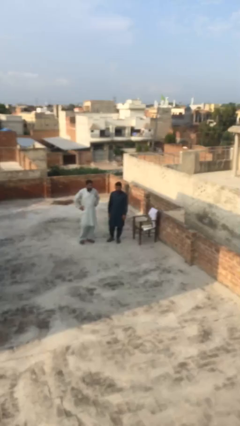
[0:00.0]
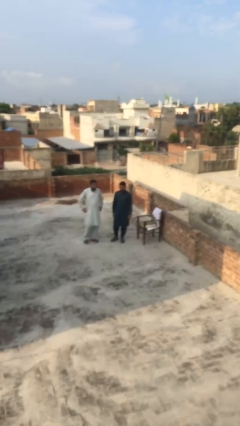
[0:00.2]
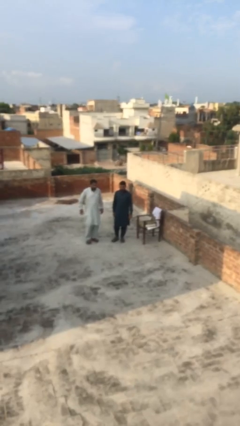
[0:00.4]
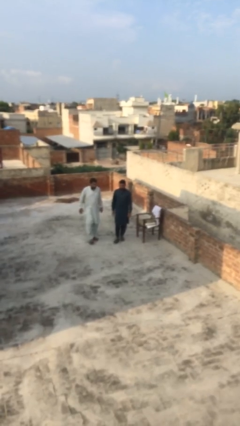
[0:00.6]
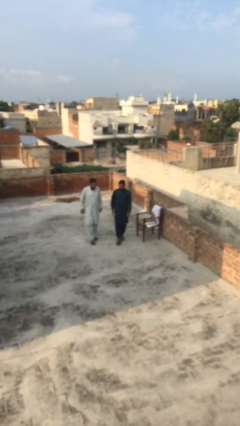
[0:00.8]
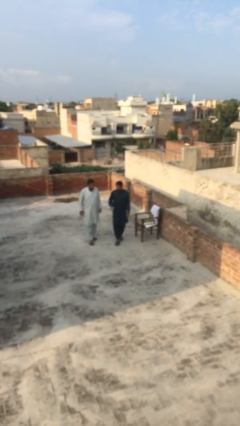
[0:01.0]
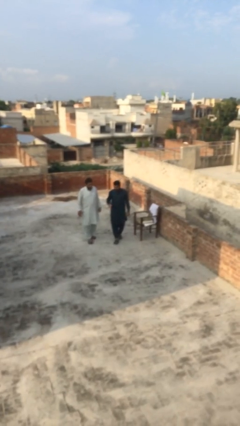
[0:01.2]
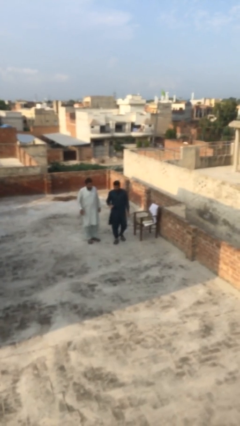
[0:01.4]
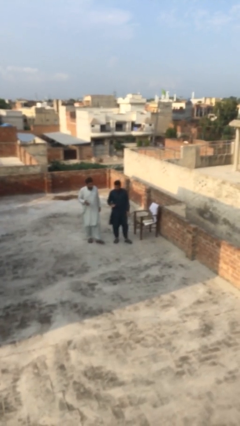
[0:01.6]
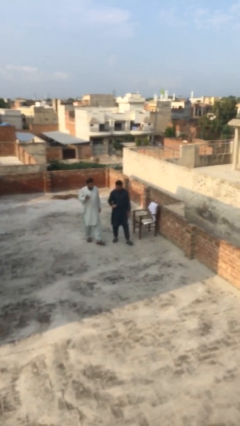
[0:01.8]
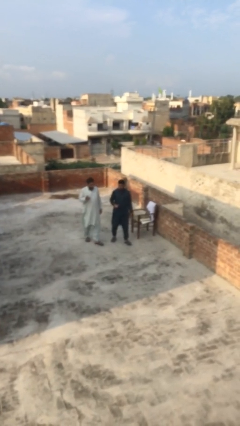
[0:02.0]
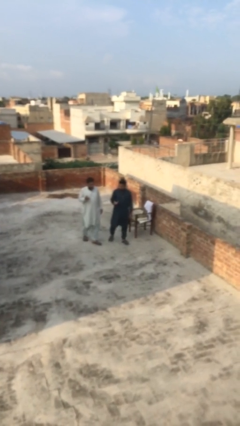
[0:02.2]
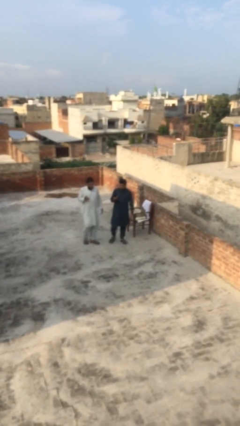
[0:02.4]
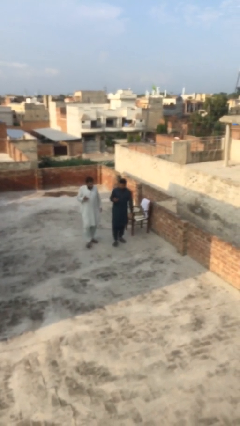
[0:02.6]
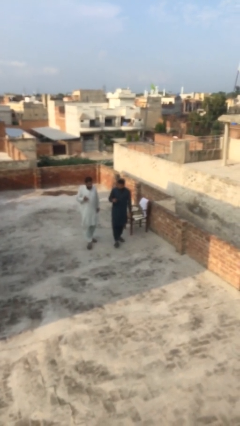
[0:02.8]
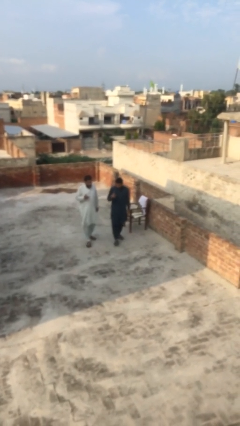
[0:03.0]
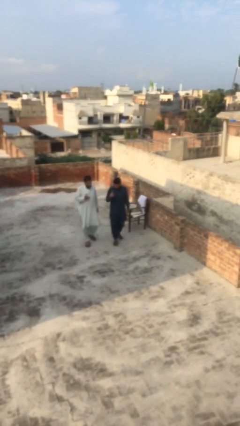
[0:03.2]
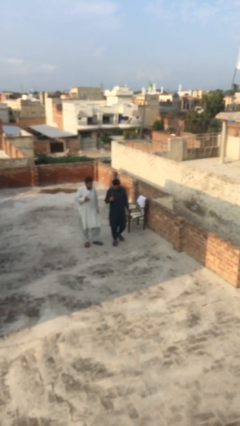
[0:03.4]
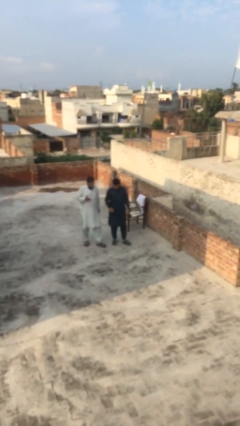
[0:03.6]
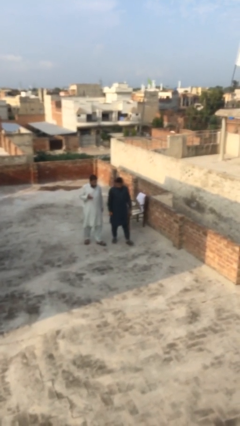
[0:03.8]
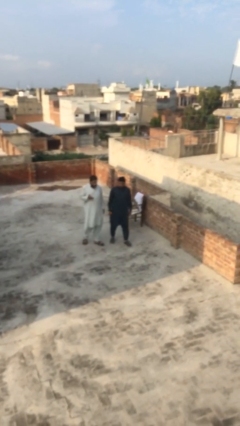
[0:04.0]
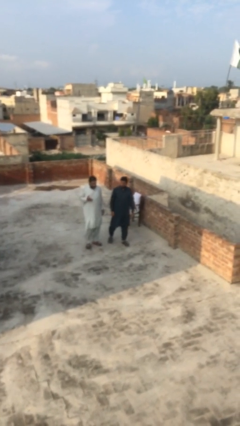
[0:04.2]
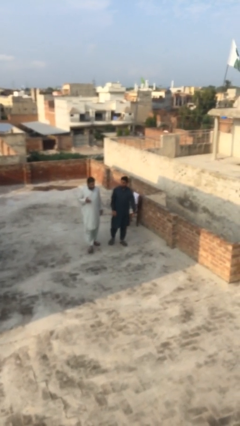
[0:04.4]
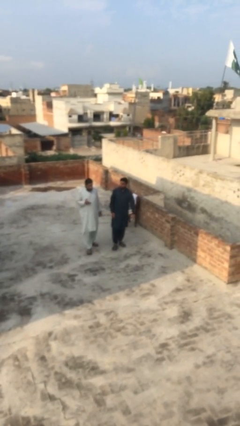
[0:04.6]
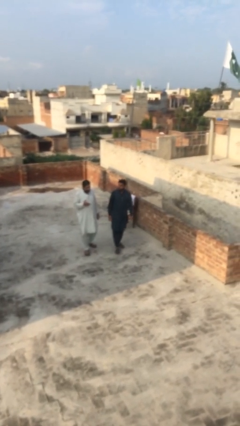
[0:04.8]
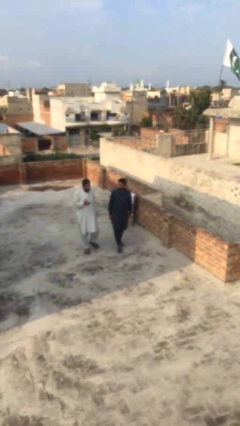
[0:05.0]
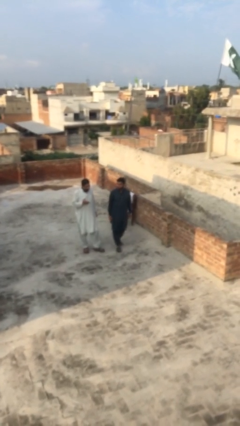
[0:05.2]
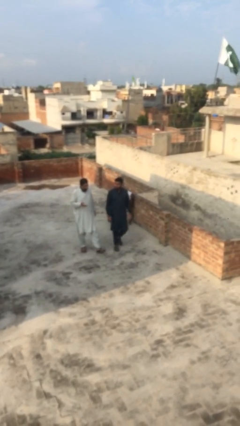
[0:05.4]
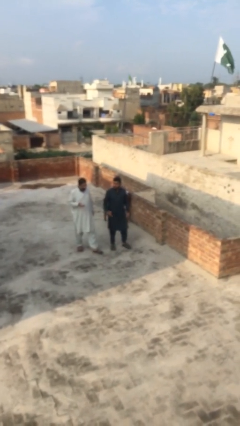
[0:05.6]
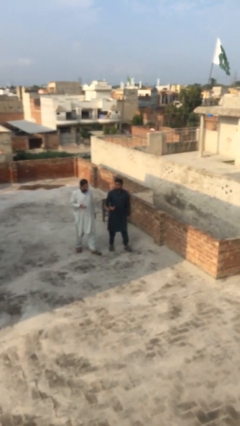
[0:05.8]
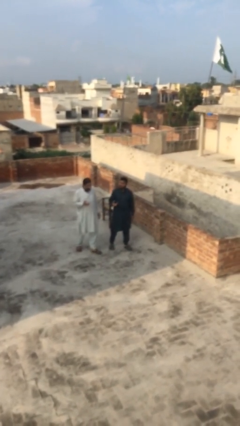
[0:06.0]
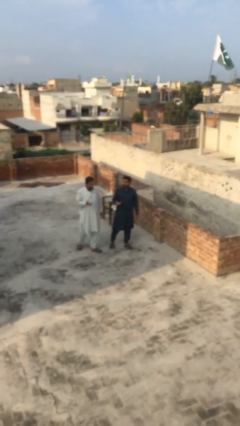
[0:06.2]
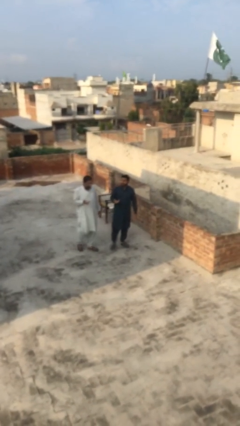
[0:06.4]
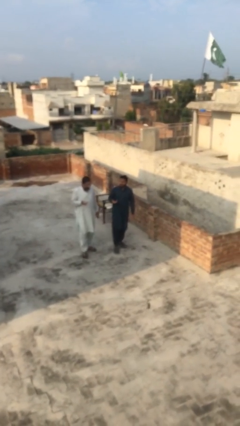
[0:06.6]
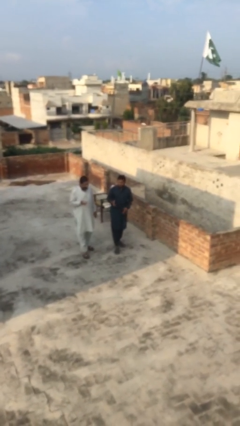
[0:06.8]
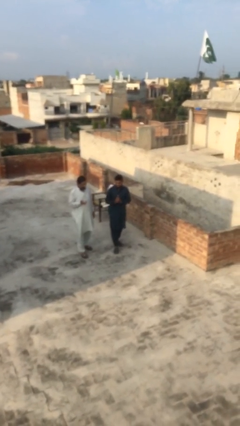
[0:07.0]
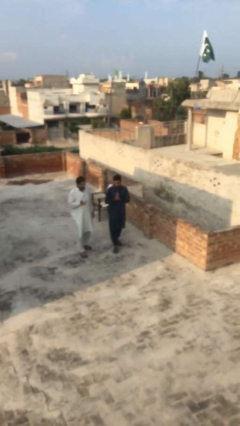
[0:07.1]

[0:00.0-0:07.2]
person talks to person

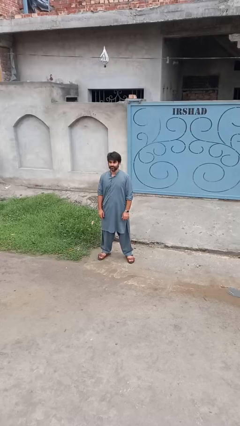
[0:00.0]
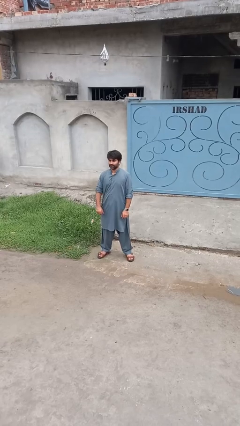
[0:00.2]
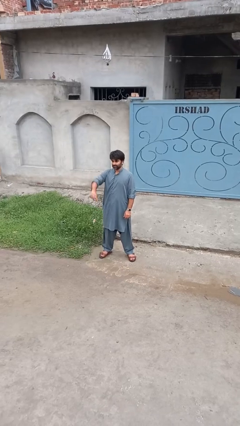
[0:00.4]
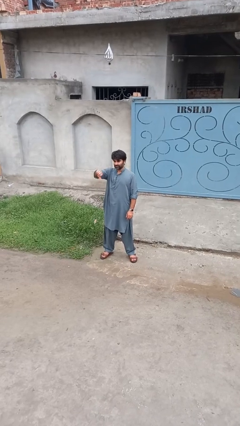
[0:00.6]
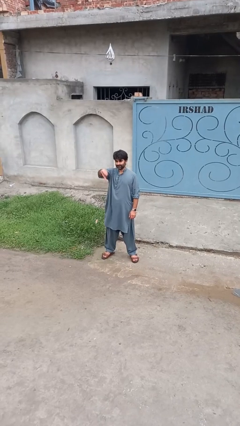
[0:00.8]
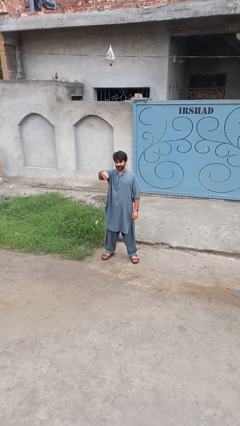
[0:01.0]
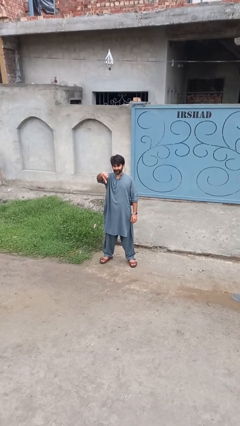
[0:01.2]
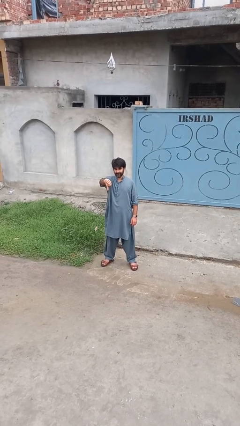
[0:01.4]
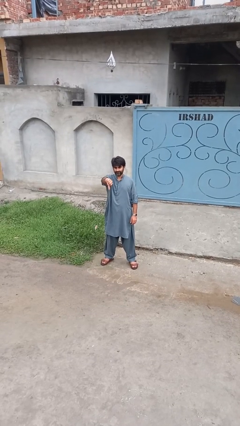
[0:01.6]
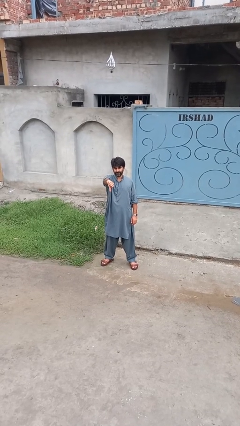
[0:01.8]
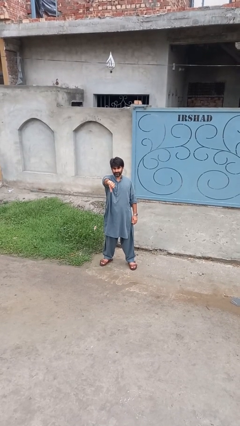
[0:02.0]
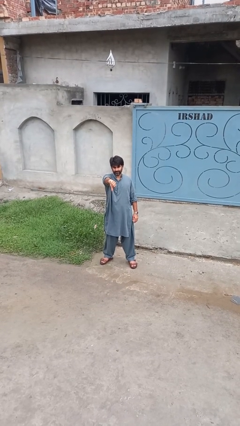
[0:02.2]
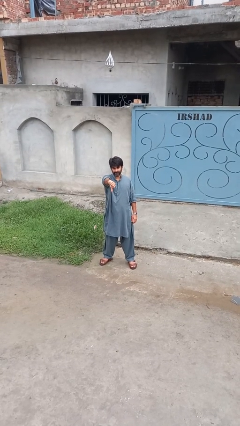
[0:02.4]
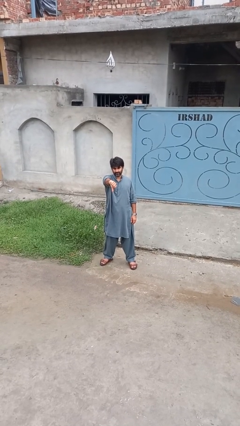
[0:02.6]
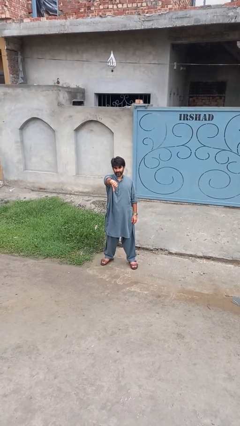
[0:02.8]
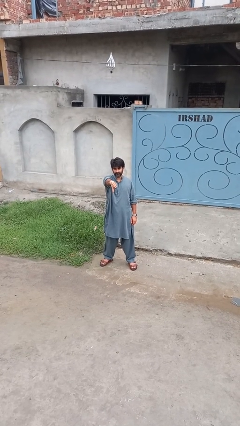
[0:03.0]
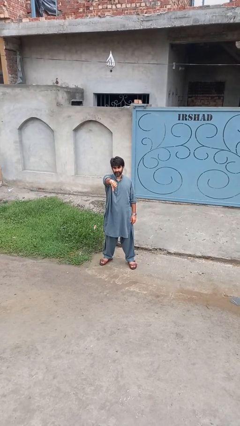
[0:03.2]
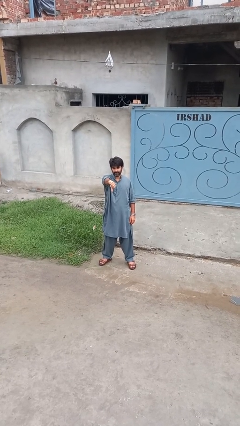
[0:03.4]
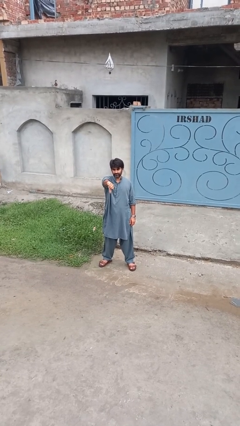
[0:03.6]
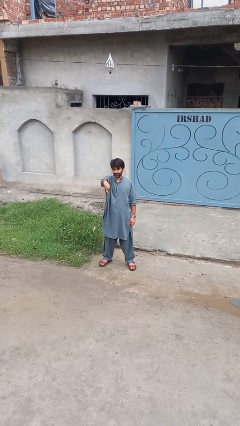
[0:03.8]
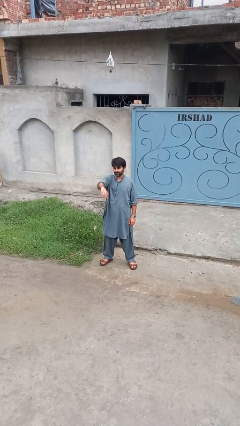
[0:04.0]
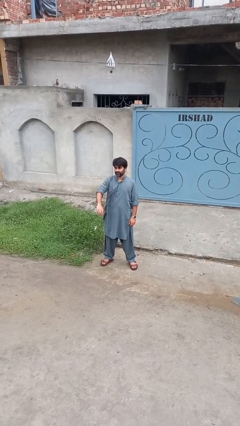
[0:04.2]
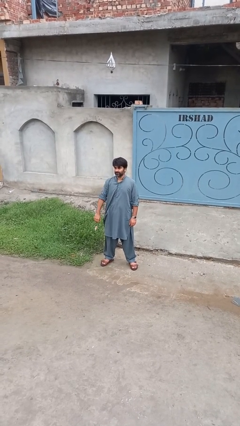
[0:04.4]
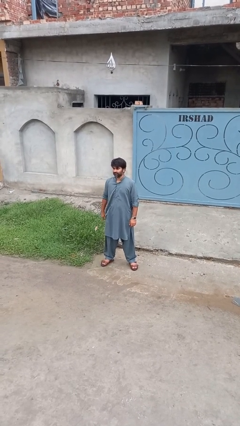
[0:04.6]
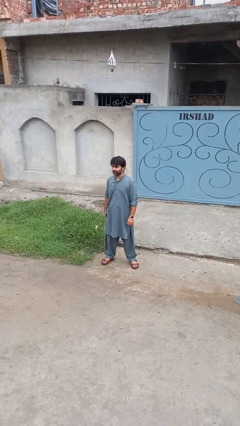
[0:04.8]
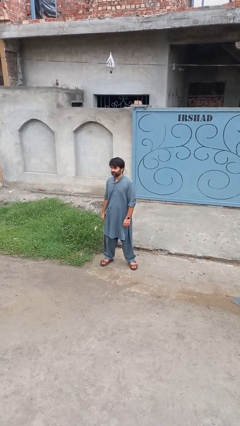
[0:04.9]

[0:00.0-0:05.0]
person gestures thumbs down

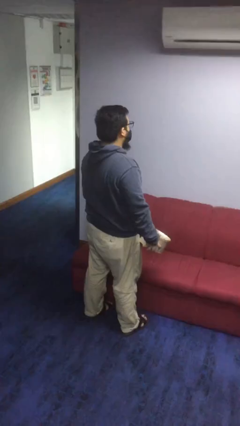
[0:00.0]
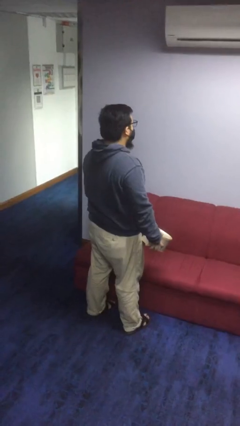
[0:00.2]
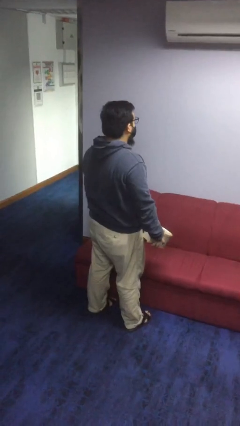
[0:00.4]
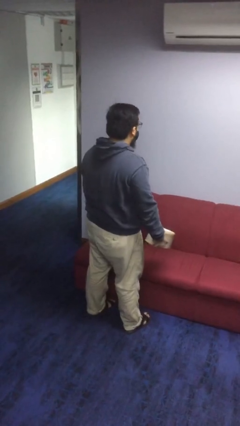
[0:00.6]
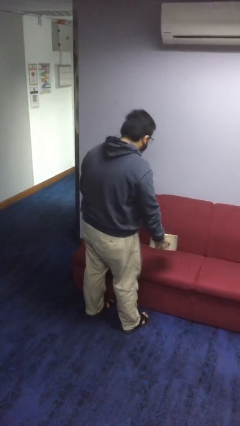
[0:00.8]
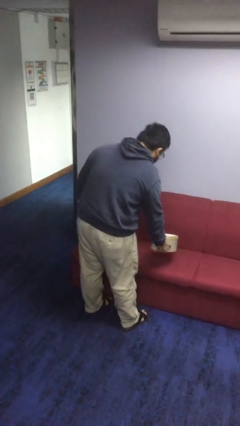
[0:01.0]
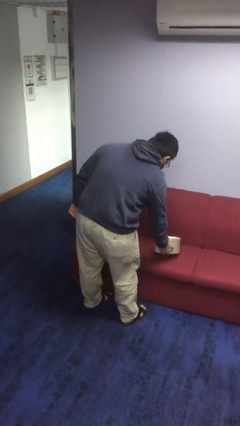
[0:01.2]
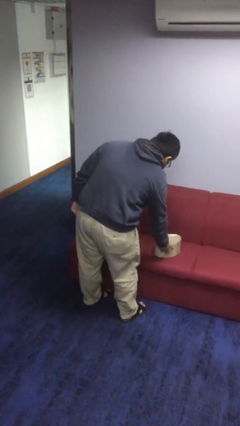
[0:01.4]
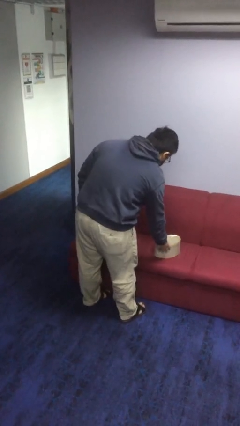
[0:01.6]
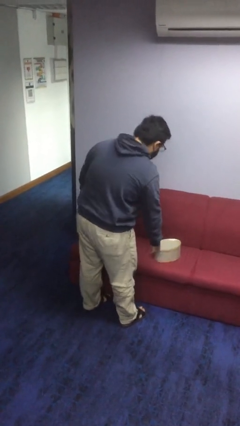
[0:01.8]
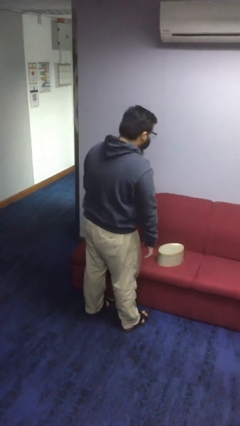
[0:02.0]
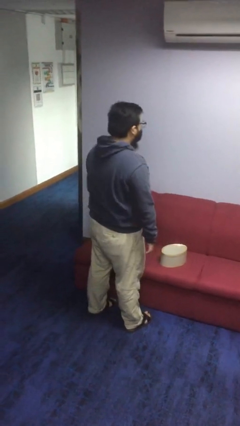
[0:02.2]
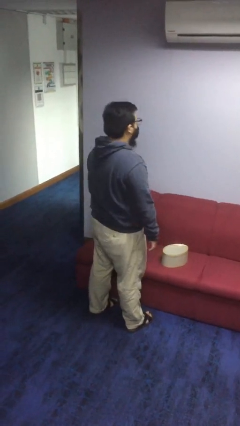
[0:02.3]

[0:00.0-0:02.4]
person puts down object on couch

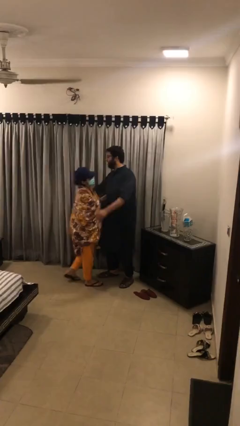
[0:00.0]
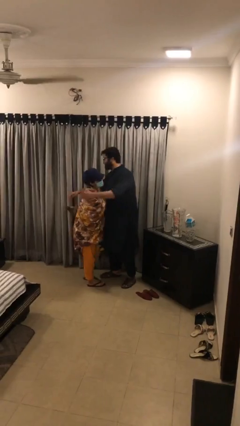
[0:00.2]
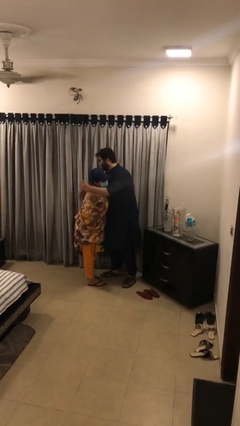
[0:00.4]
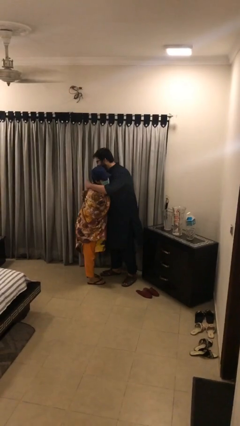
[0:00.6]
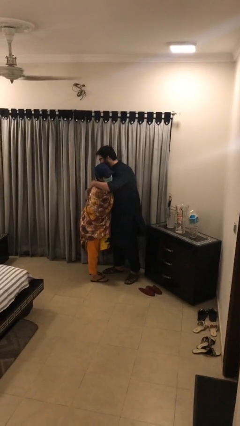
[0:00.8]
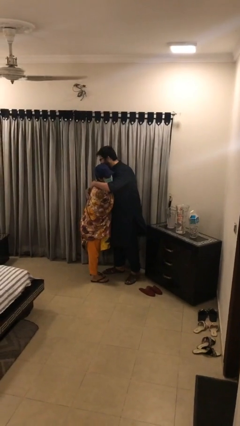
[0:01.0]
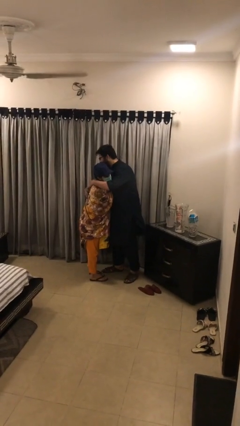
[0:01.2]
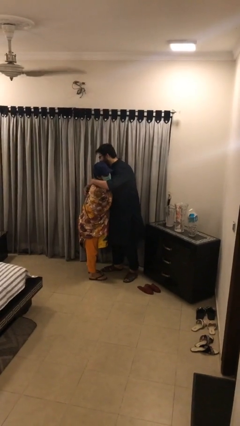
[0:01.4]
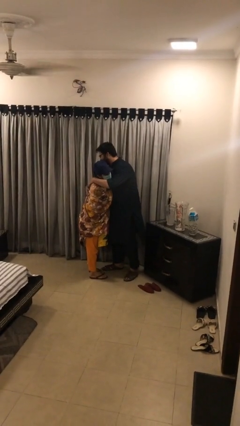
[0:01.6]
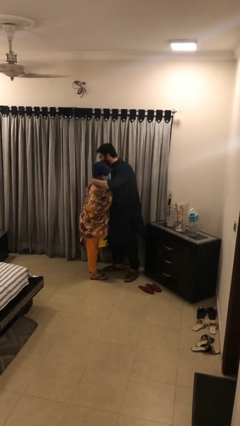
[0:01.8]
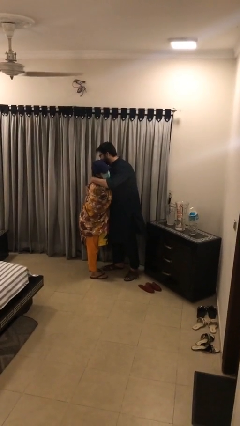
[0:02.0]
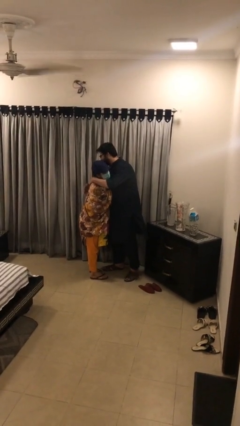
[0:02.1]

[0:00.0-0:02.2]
person embraces person

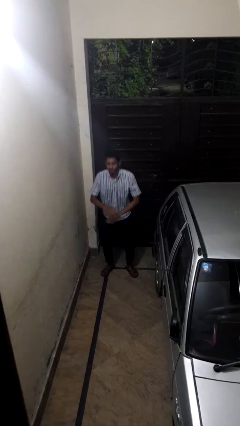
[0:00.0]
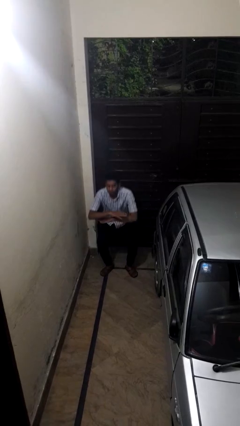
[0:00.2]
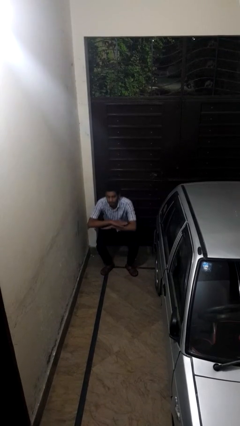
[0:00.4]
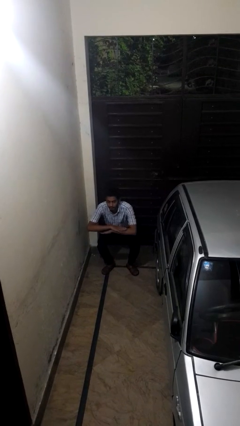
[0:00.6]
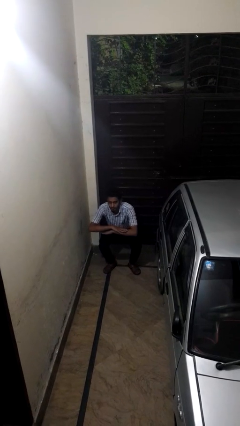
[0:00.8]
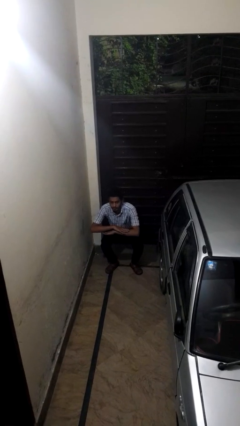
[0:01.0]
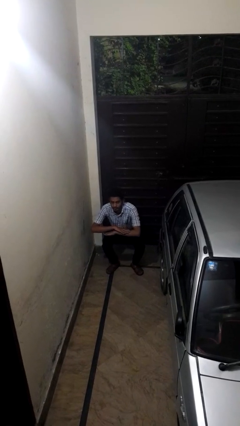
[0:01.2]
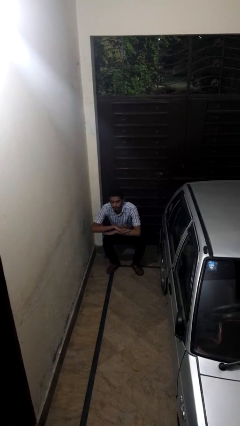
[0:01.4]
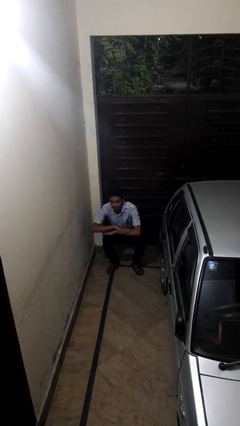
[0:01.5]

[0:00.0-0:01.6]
person squats
